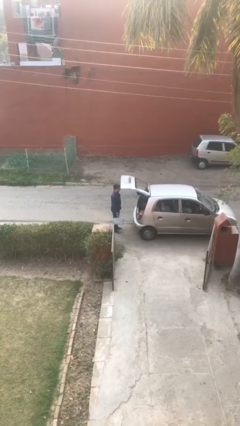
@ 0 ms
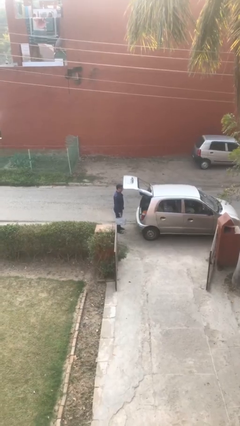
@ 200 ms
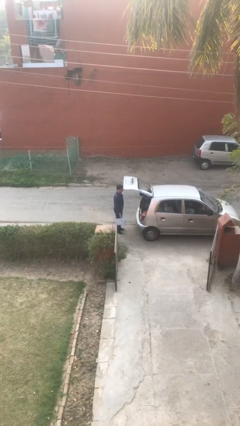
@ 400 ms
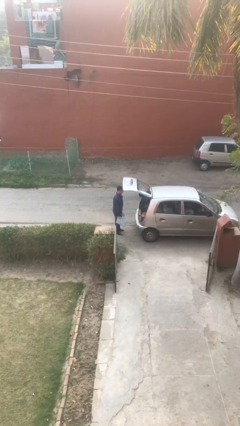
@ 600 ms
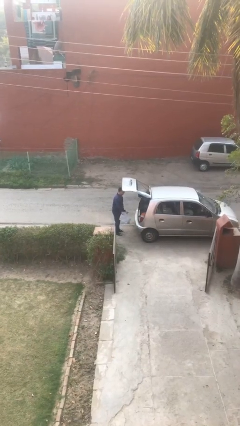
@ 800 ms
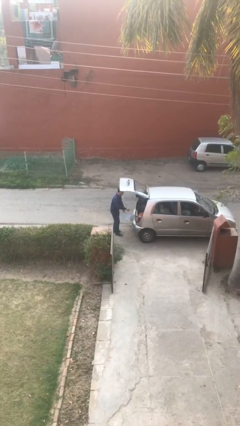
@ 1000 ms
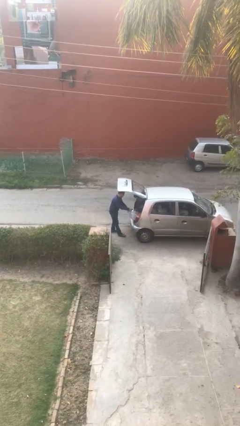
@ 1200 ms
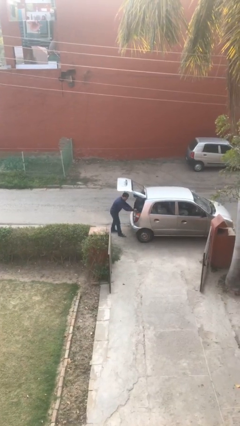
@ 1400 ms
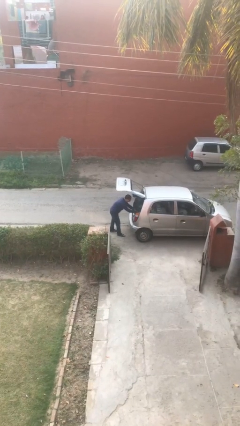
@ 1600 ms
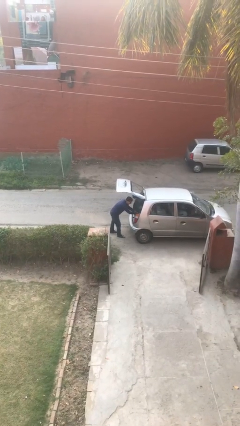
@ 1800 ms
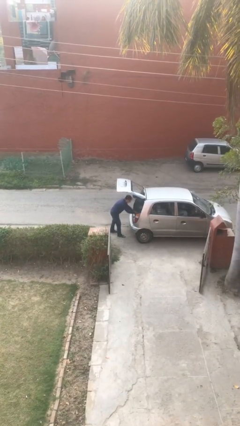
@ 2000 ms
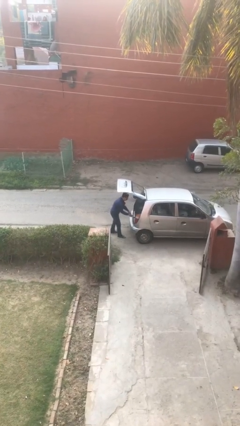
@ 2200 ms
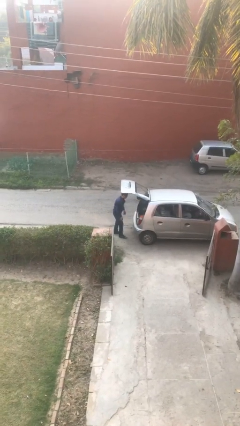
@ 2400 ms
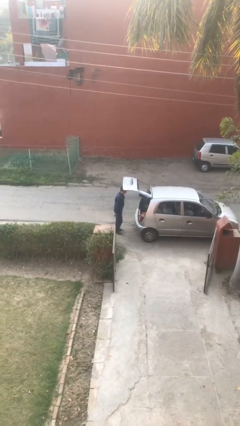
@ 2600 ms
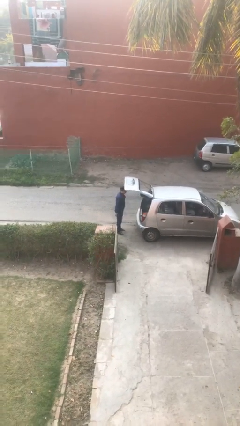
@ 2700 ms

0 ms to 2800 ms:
person loads car

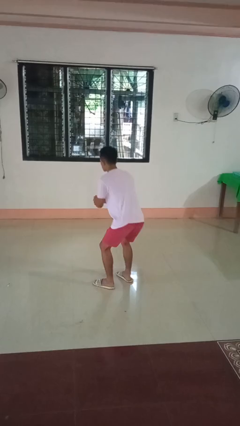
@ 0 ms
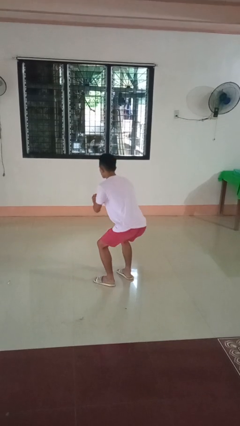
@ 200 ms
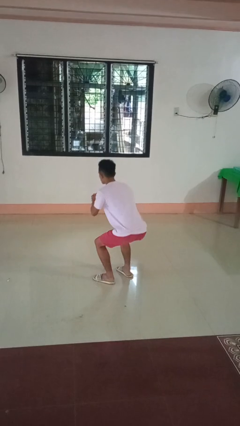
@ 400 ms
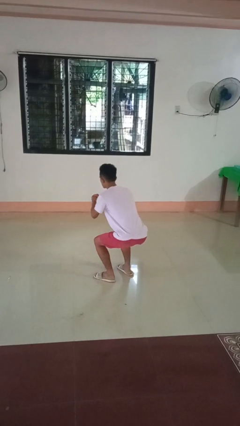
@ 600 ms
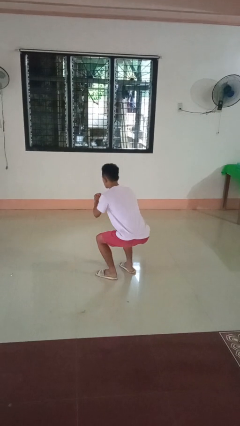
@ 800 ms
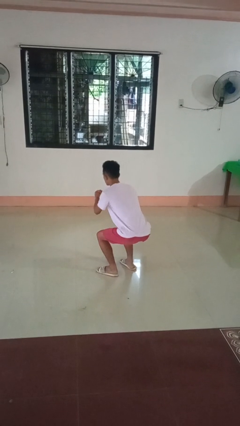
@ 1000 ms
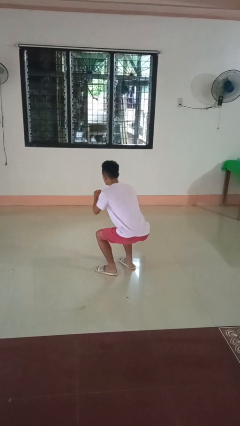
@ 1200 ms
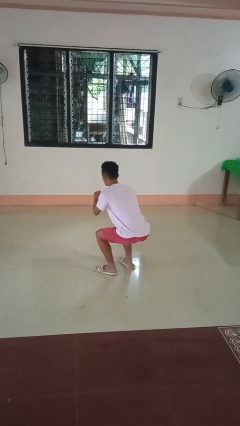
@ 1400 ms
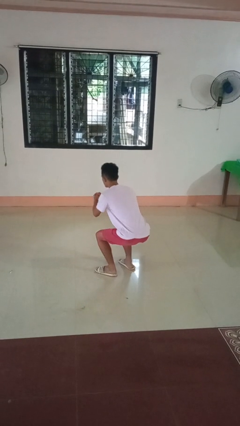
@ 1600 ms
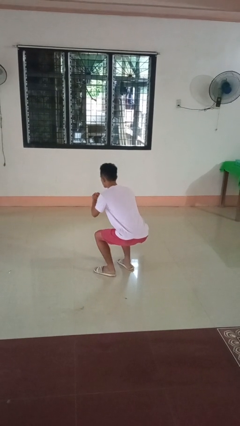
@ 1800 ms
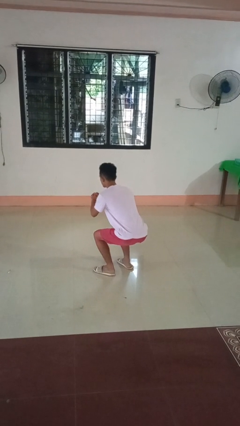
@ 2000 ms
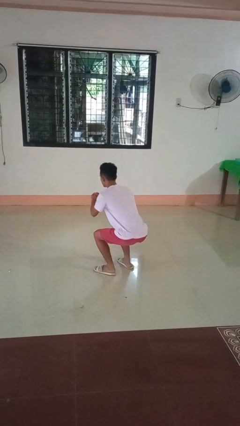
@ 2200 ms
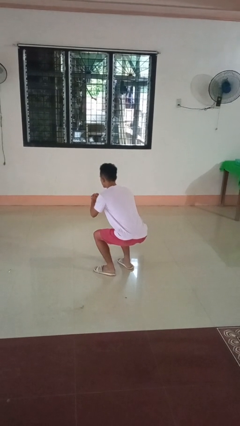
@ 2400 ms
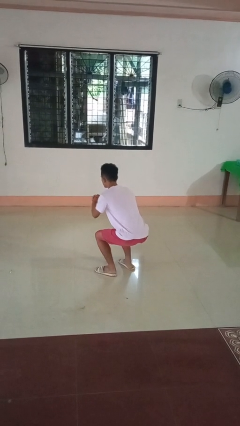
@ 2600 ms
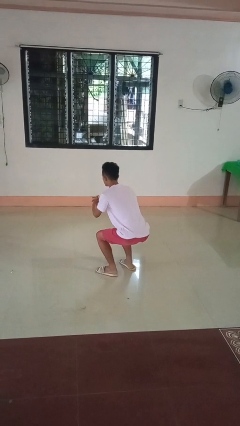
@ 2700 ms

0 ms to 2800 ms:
person squats

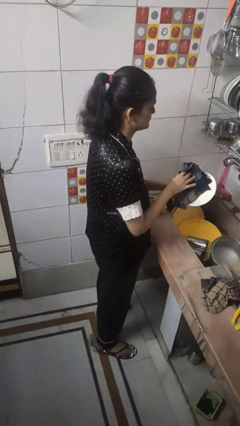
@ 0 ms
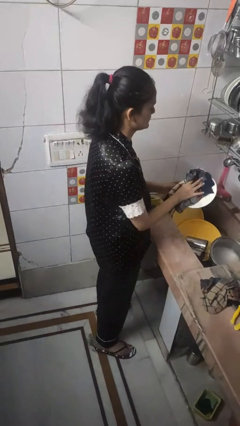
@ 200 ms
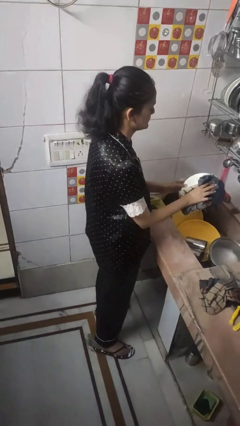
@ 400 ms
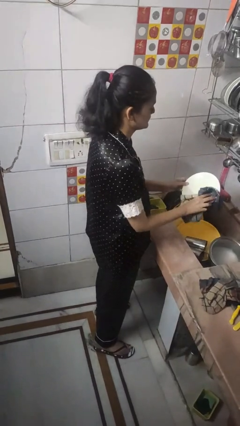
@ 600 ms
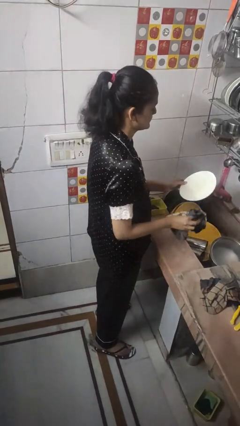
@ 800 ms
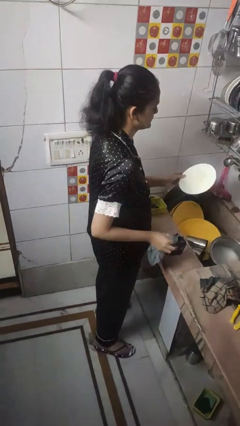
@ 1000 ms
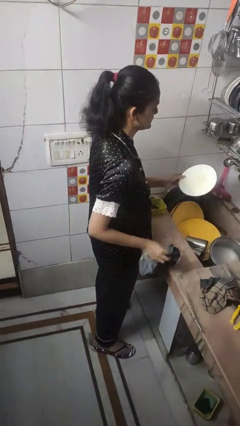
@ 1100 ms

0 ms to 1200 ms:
person dries dish

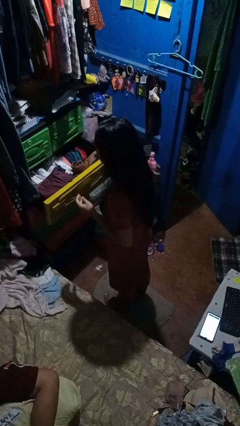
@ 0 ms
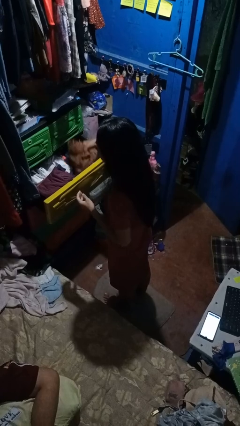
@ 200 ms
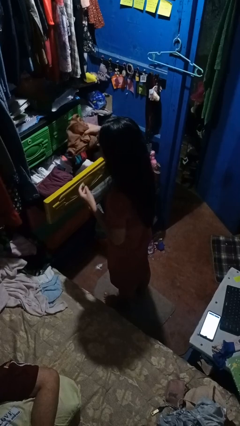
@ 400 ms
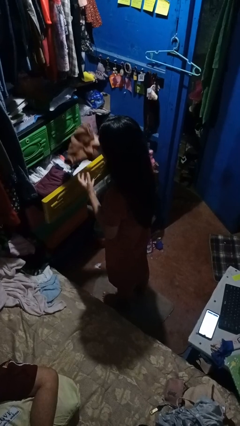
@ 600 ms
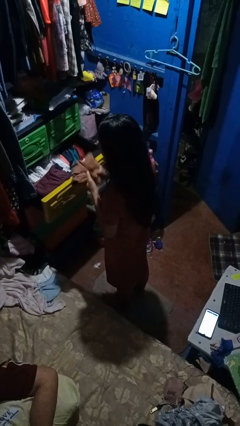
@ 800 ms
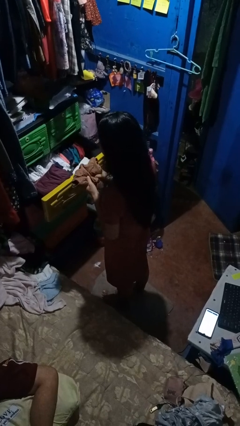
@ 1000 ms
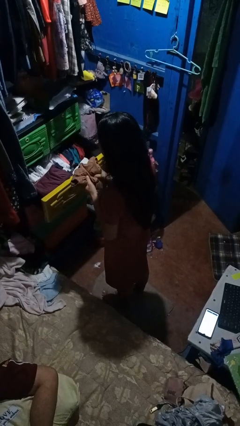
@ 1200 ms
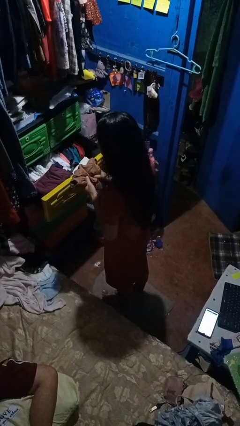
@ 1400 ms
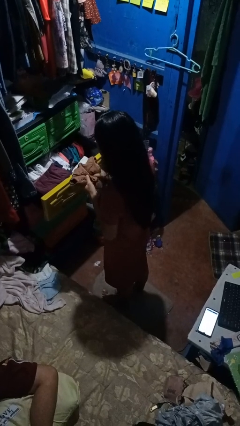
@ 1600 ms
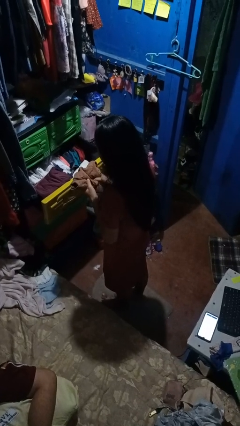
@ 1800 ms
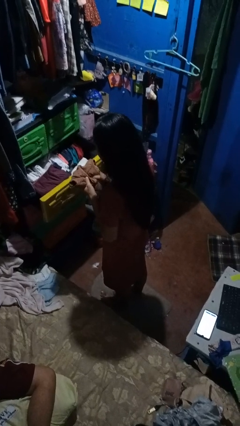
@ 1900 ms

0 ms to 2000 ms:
person takes clothes from dresser

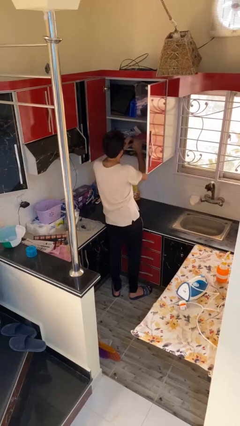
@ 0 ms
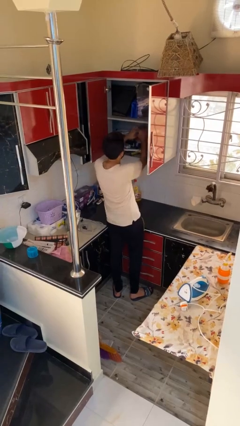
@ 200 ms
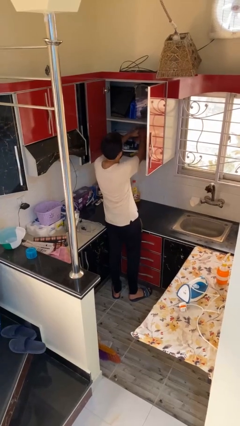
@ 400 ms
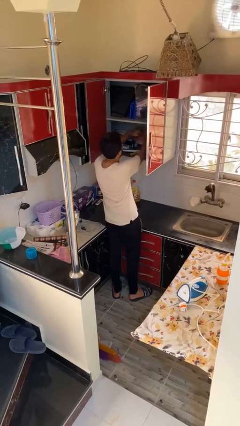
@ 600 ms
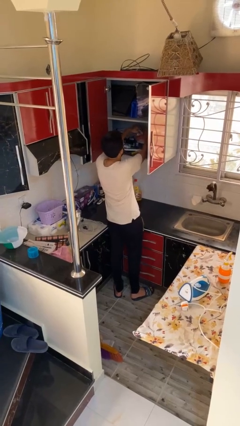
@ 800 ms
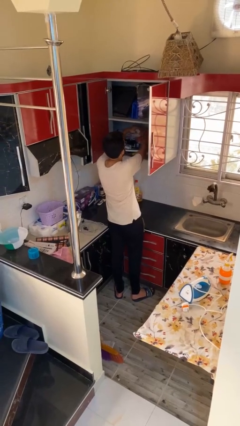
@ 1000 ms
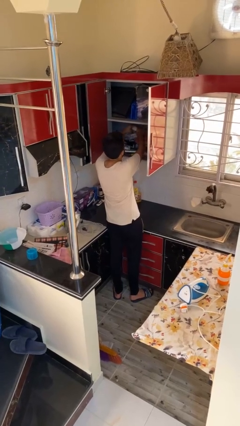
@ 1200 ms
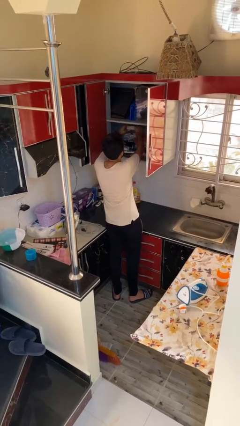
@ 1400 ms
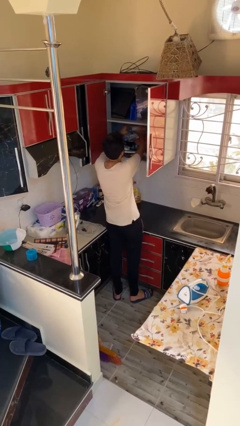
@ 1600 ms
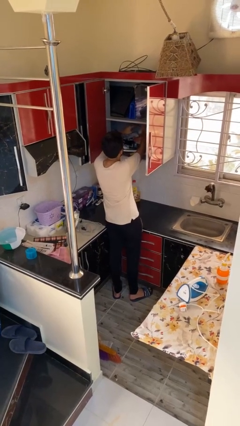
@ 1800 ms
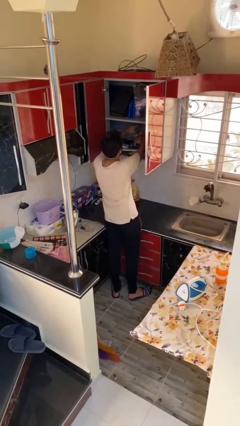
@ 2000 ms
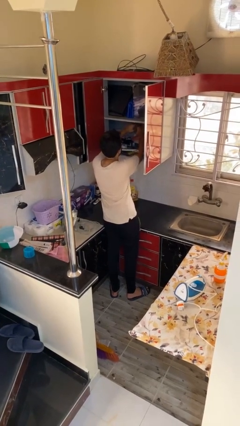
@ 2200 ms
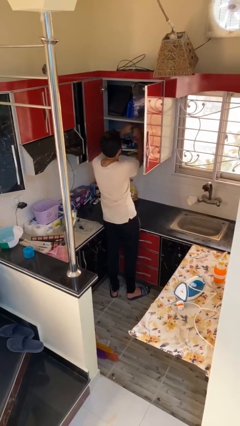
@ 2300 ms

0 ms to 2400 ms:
person searches in cabinet

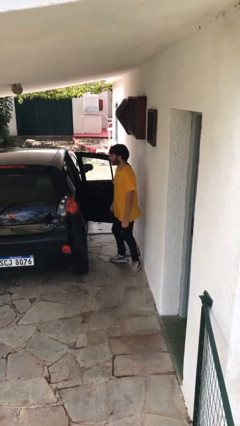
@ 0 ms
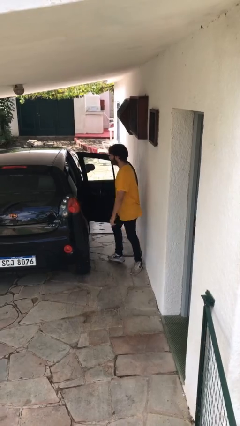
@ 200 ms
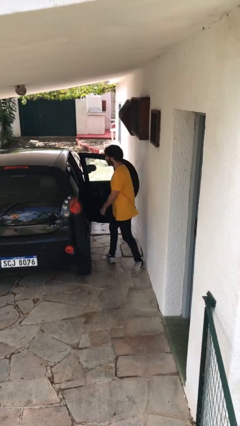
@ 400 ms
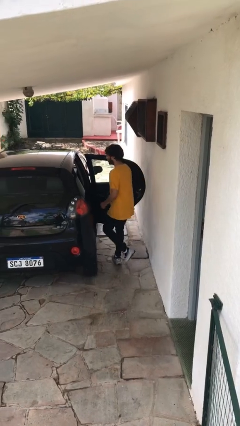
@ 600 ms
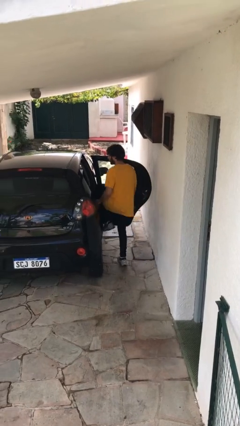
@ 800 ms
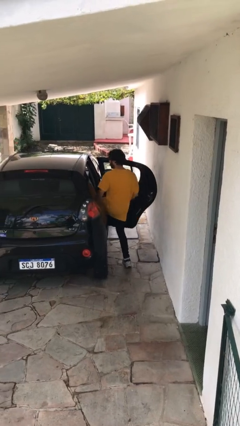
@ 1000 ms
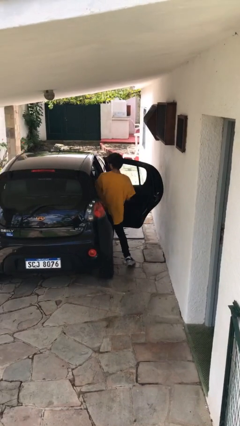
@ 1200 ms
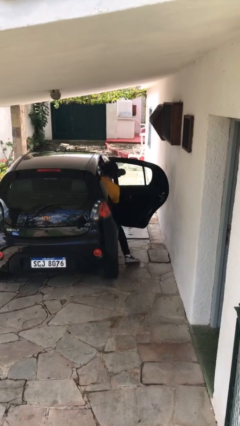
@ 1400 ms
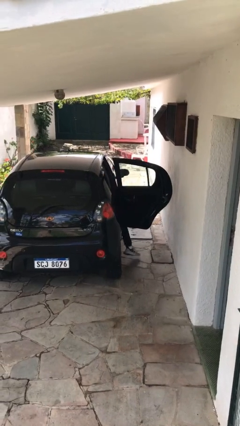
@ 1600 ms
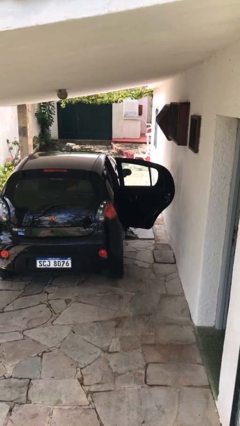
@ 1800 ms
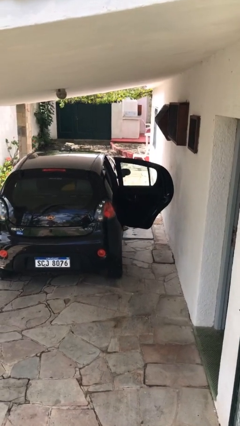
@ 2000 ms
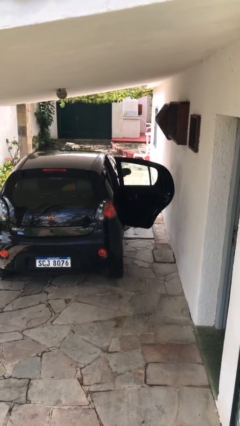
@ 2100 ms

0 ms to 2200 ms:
person enters car

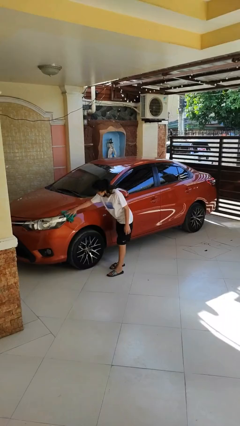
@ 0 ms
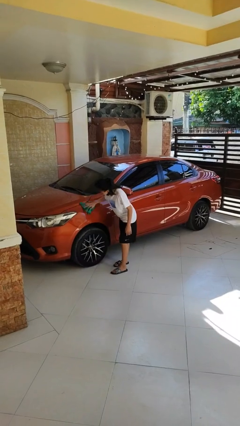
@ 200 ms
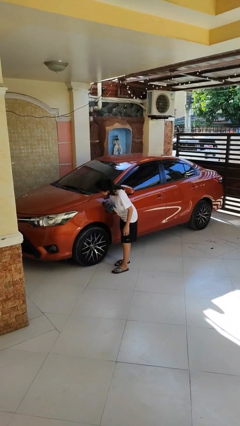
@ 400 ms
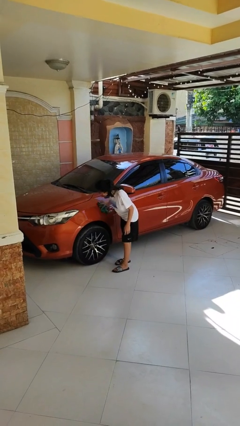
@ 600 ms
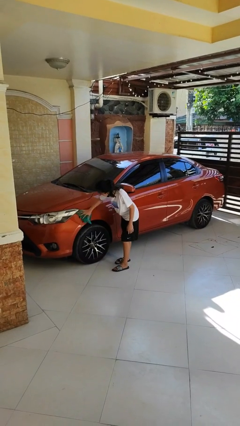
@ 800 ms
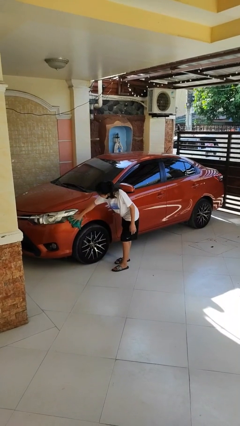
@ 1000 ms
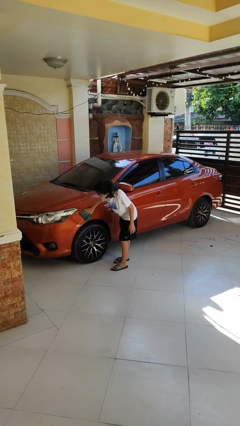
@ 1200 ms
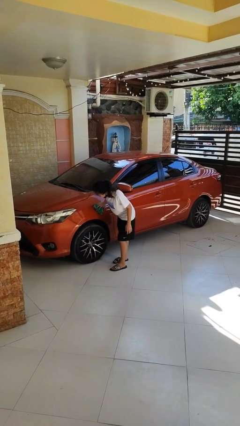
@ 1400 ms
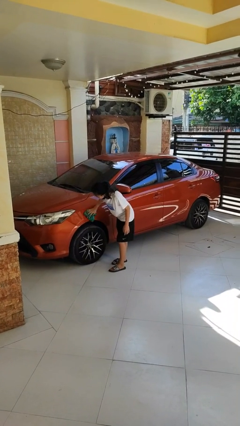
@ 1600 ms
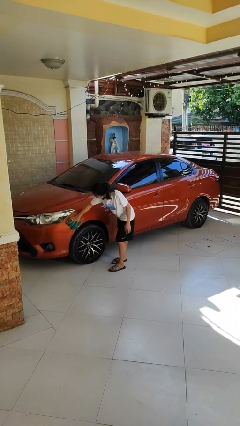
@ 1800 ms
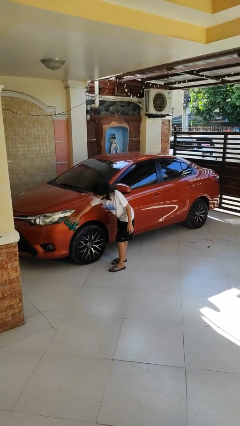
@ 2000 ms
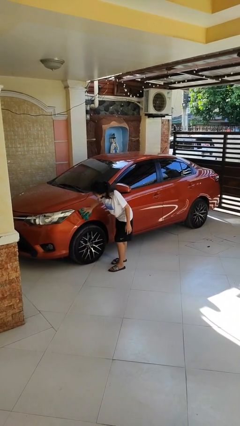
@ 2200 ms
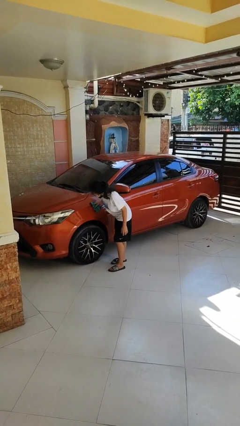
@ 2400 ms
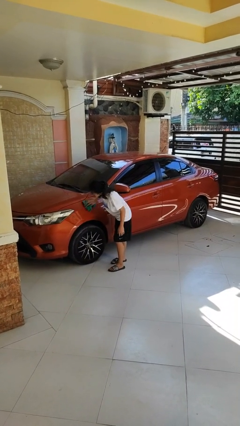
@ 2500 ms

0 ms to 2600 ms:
person polishes car with rag

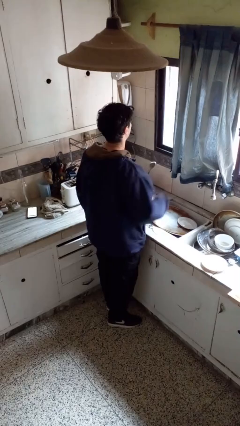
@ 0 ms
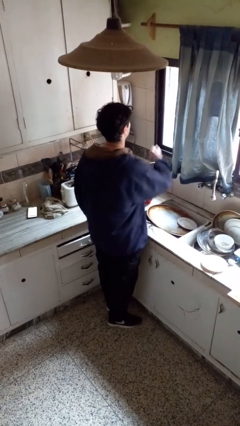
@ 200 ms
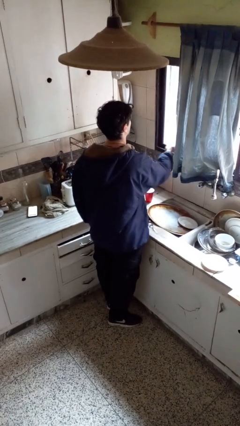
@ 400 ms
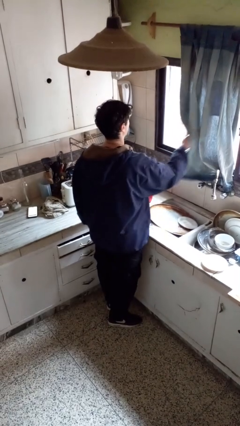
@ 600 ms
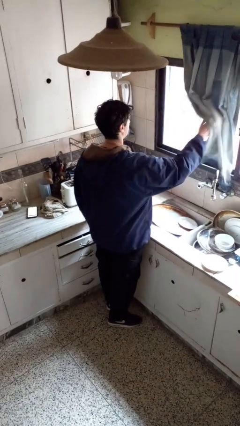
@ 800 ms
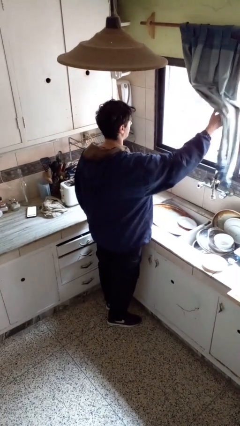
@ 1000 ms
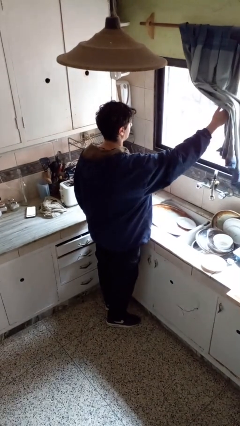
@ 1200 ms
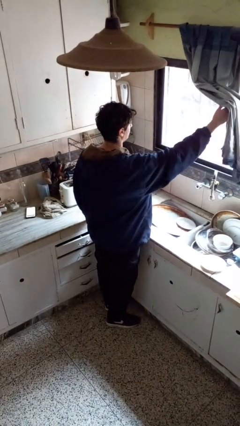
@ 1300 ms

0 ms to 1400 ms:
person opens curtains
